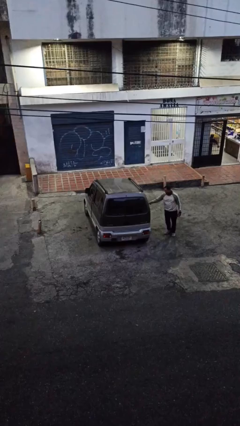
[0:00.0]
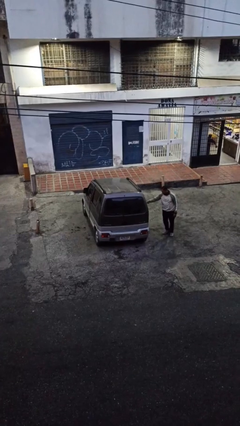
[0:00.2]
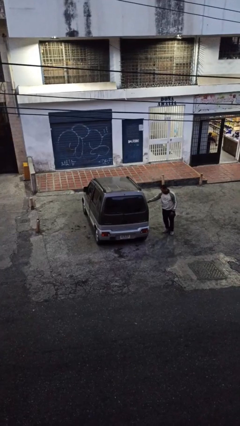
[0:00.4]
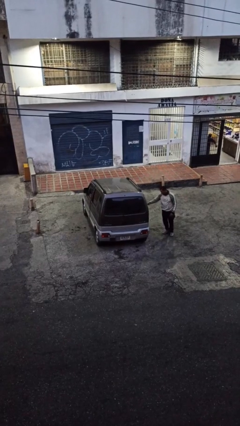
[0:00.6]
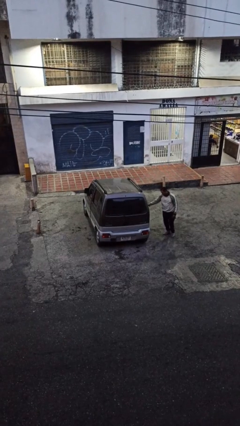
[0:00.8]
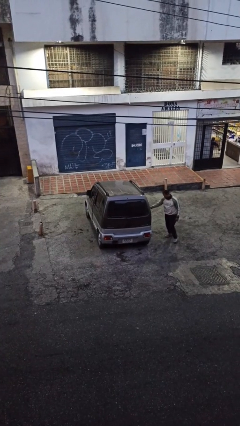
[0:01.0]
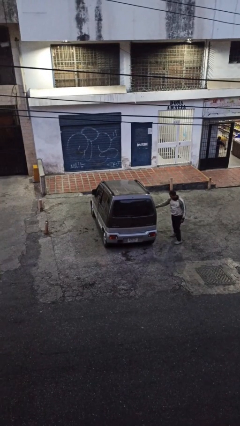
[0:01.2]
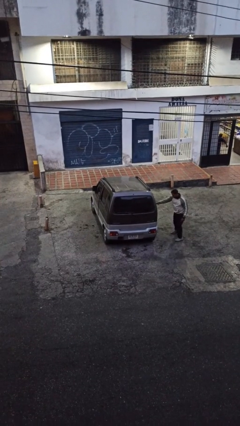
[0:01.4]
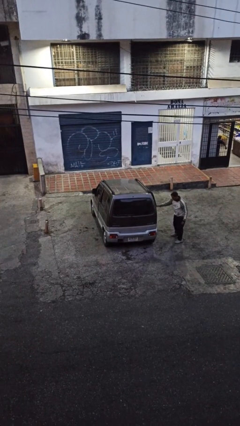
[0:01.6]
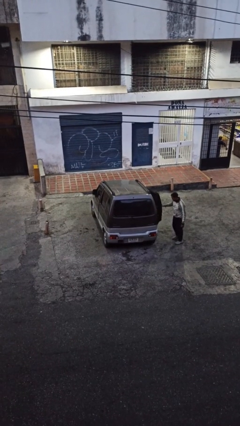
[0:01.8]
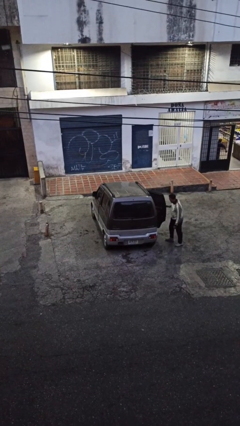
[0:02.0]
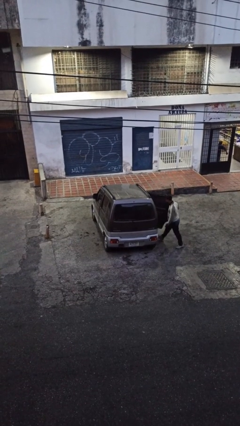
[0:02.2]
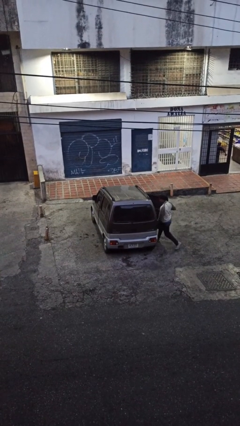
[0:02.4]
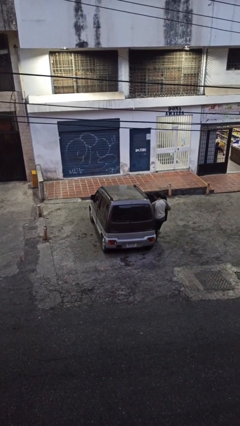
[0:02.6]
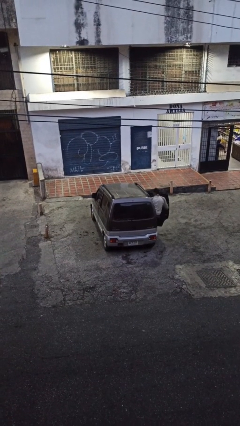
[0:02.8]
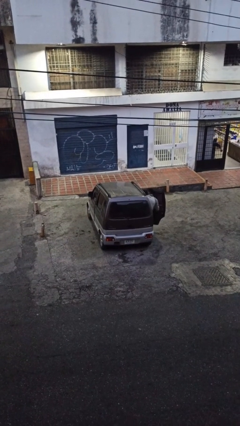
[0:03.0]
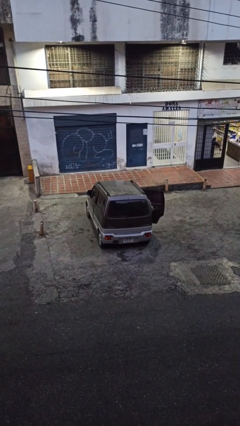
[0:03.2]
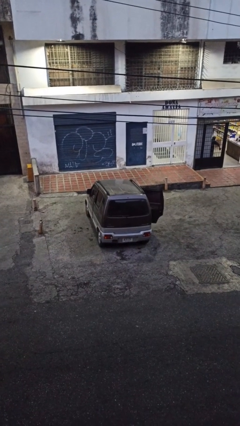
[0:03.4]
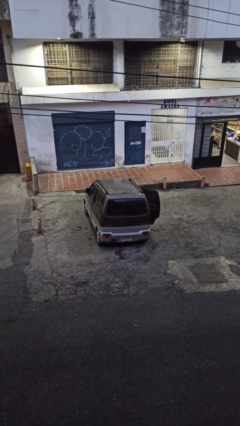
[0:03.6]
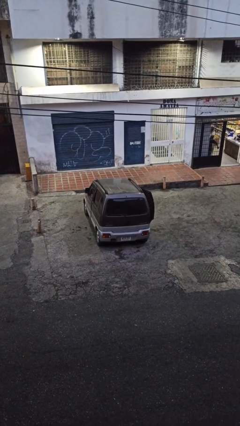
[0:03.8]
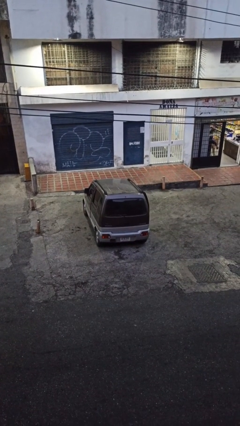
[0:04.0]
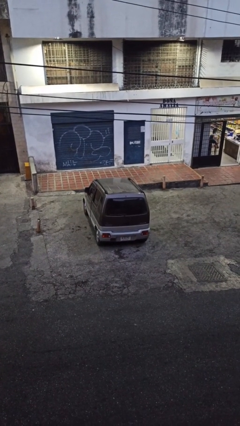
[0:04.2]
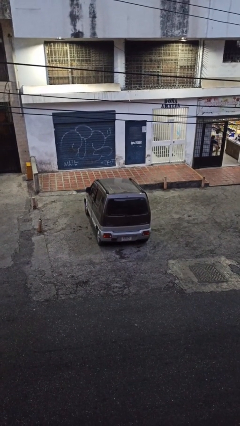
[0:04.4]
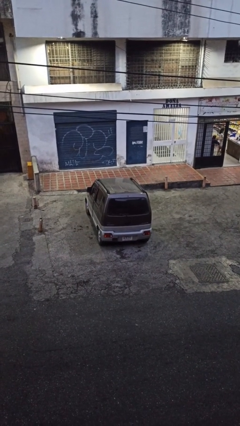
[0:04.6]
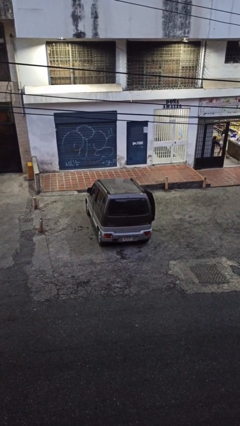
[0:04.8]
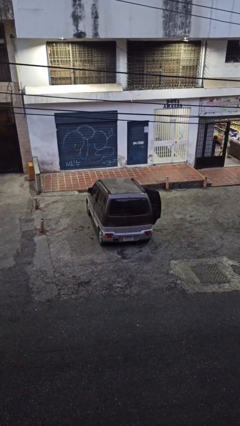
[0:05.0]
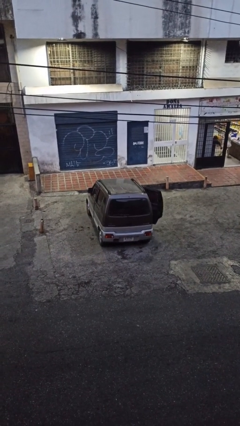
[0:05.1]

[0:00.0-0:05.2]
car picks up person

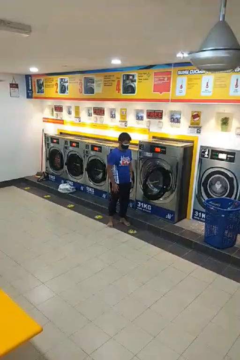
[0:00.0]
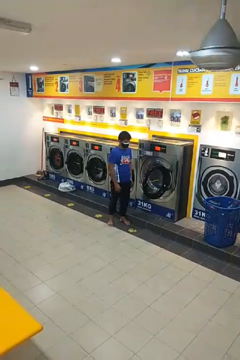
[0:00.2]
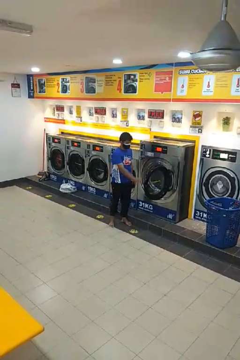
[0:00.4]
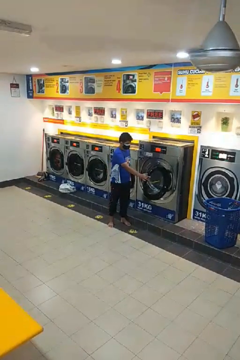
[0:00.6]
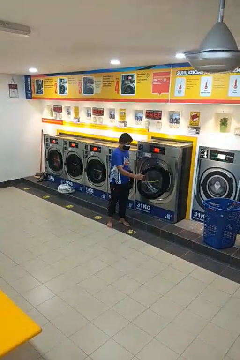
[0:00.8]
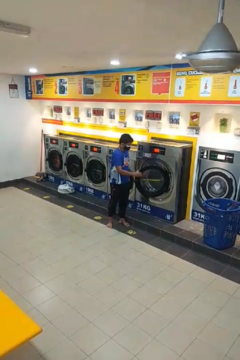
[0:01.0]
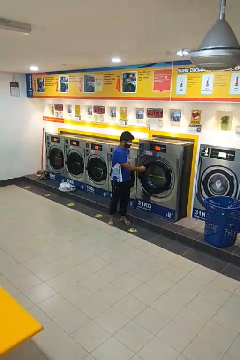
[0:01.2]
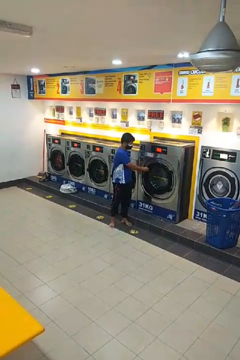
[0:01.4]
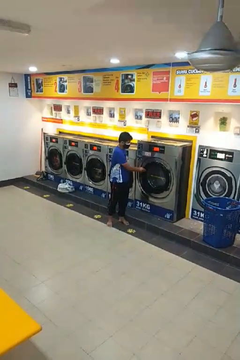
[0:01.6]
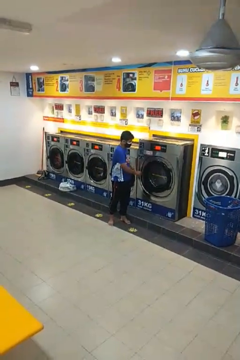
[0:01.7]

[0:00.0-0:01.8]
person closes clothes washer

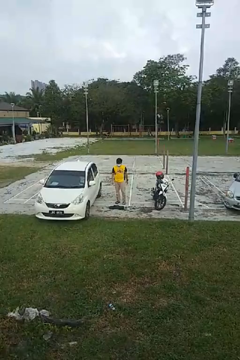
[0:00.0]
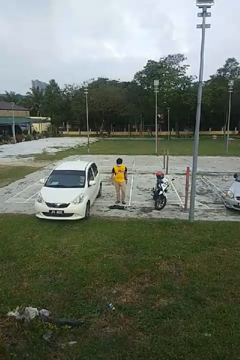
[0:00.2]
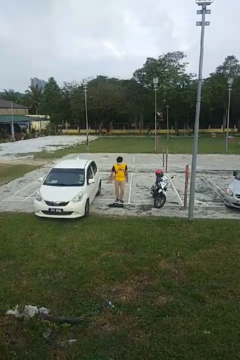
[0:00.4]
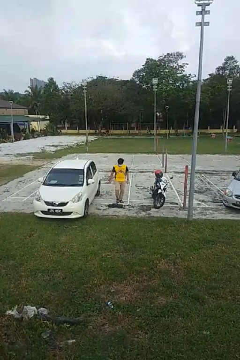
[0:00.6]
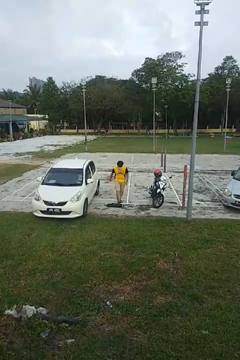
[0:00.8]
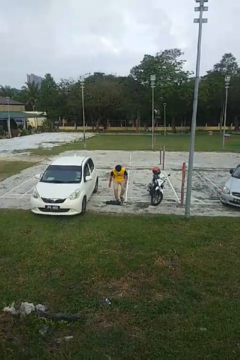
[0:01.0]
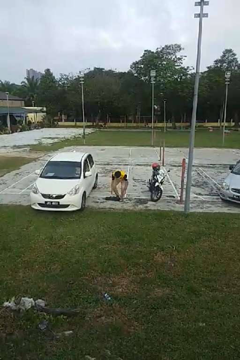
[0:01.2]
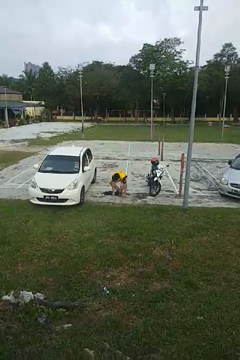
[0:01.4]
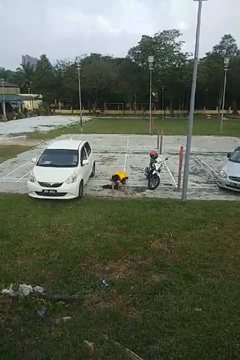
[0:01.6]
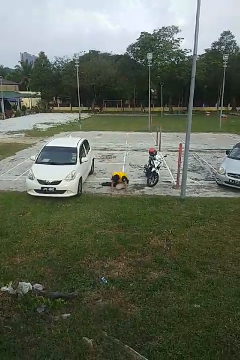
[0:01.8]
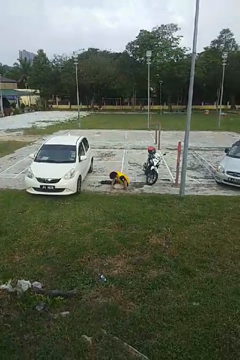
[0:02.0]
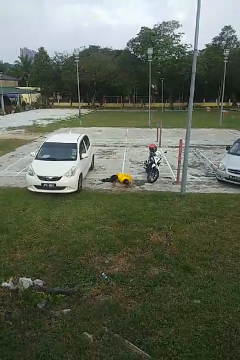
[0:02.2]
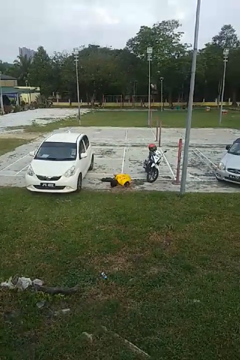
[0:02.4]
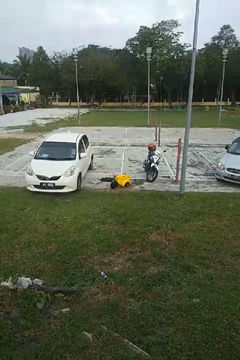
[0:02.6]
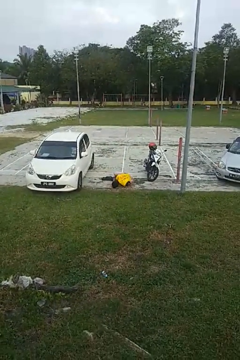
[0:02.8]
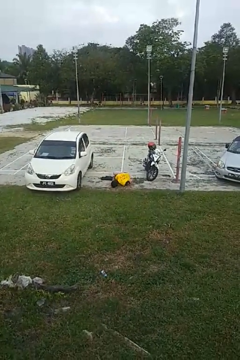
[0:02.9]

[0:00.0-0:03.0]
person trips on object on floor

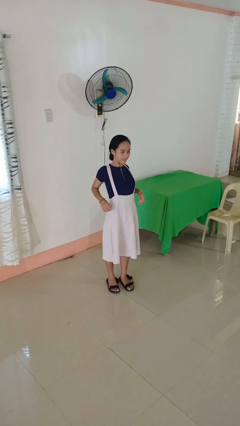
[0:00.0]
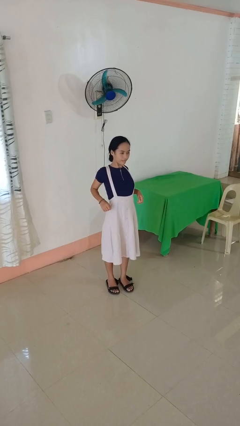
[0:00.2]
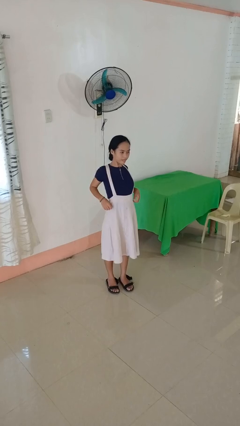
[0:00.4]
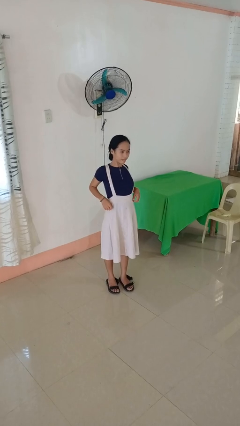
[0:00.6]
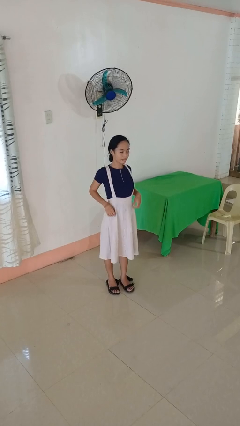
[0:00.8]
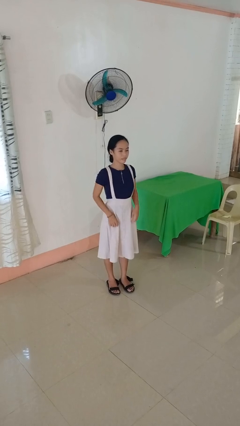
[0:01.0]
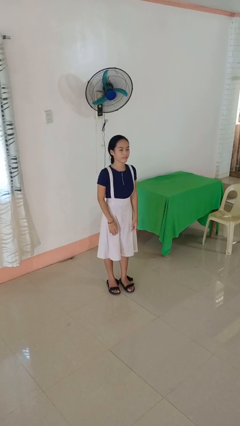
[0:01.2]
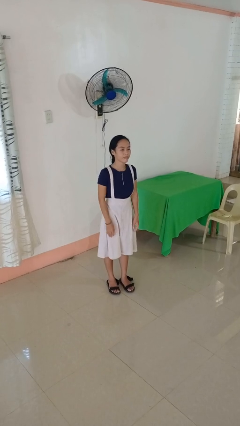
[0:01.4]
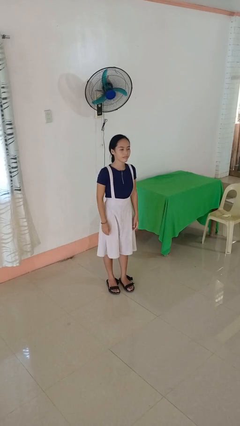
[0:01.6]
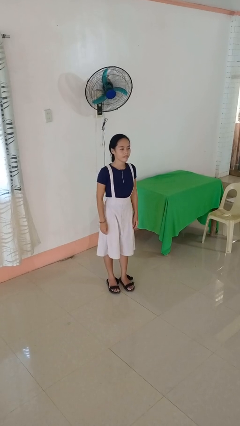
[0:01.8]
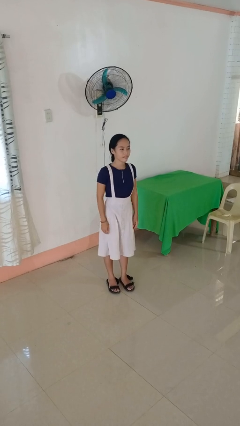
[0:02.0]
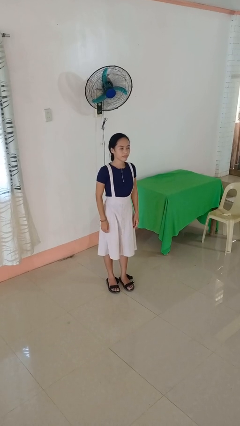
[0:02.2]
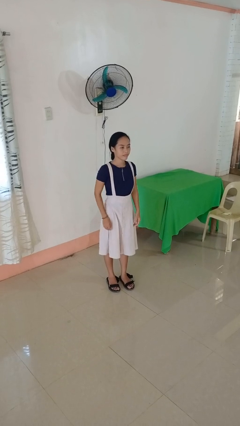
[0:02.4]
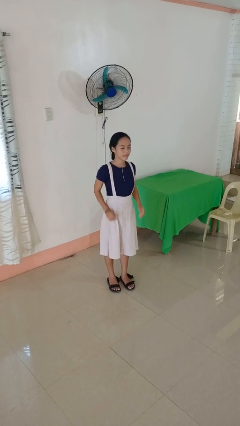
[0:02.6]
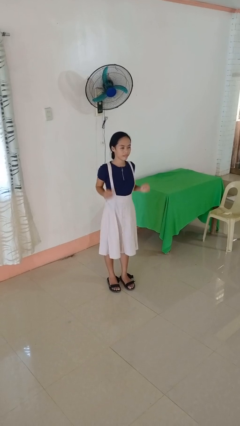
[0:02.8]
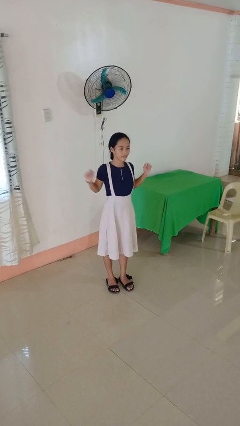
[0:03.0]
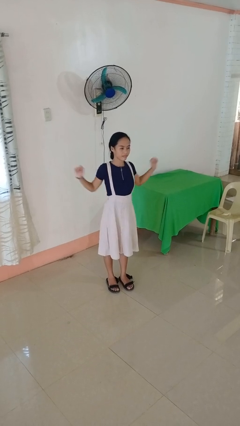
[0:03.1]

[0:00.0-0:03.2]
person stretches back

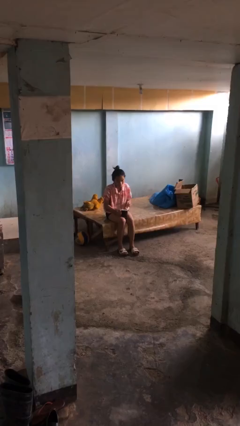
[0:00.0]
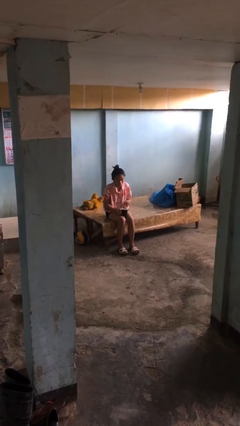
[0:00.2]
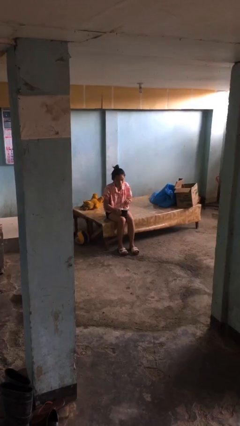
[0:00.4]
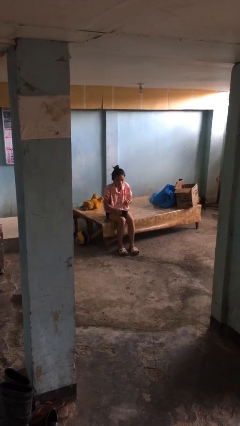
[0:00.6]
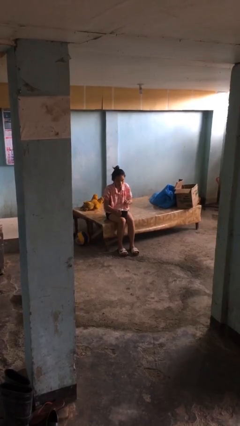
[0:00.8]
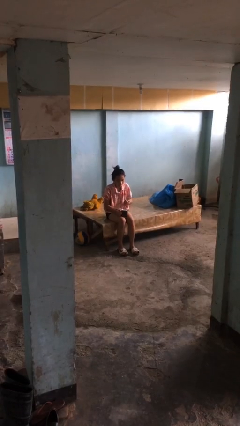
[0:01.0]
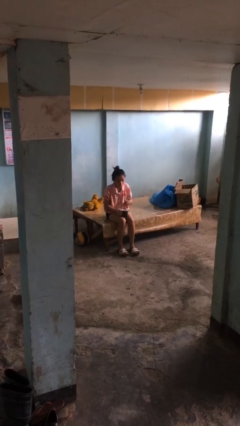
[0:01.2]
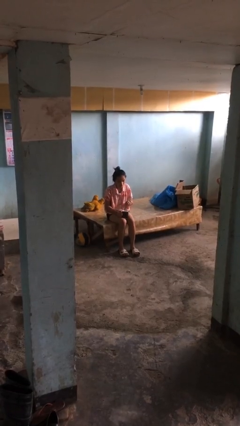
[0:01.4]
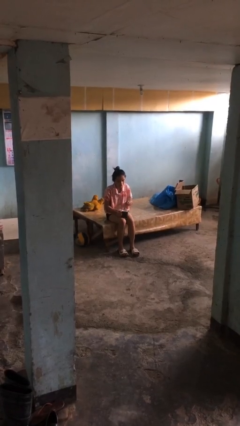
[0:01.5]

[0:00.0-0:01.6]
person stirs mug

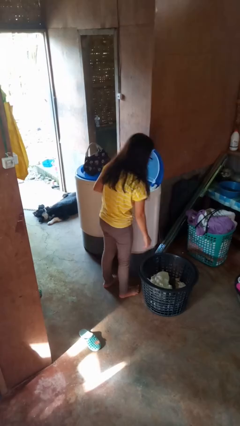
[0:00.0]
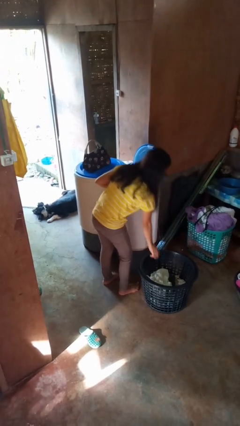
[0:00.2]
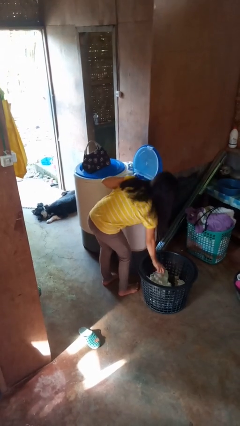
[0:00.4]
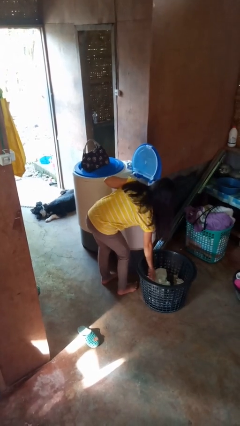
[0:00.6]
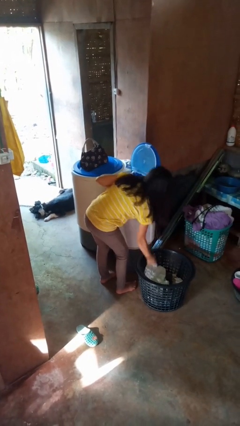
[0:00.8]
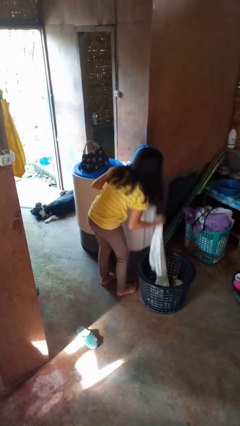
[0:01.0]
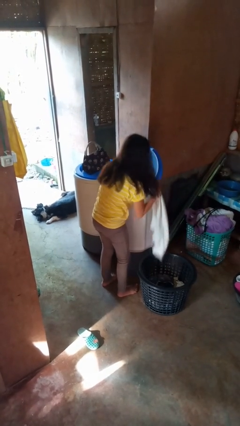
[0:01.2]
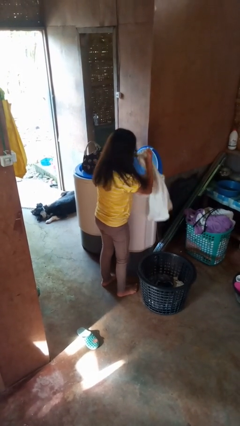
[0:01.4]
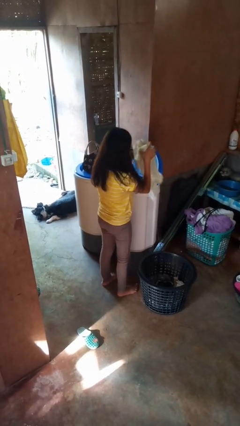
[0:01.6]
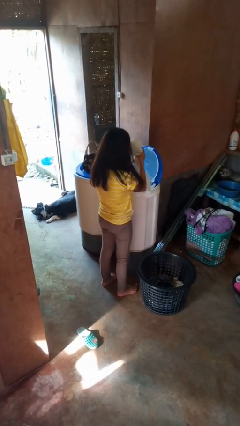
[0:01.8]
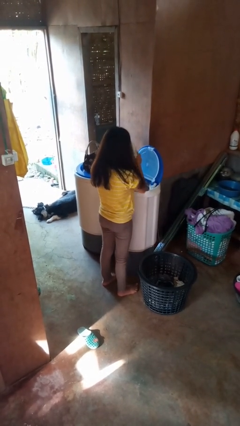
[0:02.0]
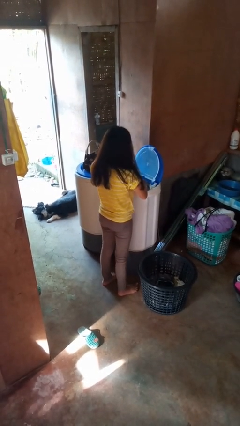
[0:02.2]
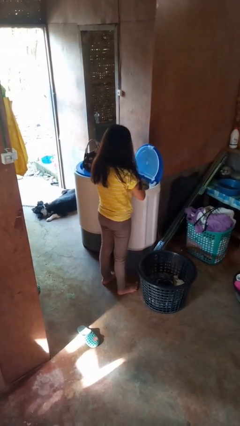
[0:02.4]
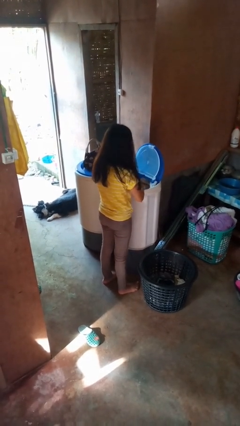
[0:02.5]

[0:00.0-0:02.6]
person loads clotheswasher

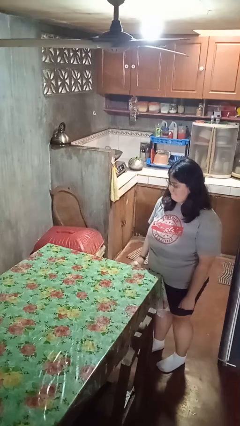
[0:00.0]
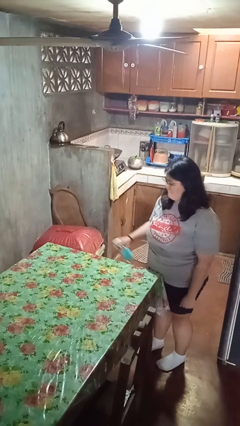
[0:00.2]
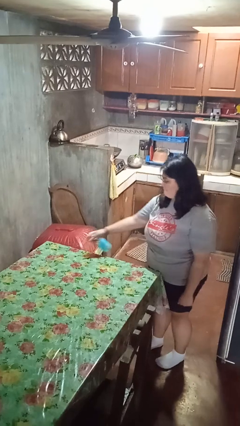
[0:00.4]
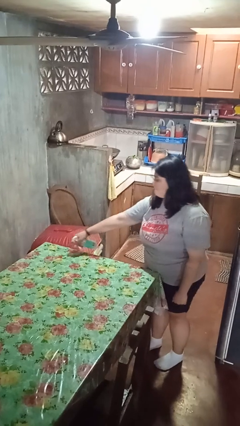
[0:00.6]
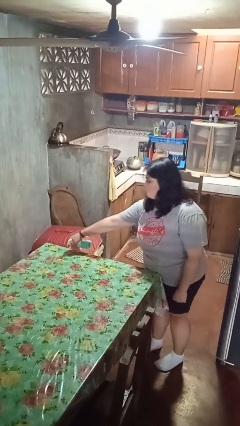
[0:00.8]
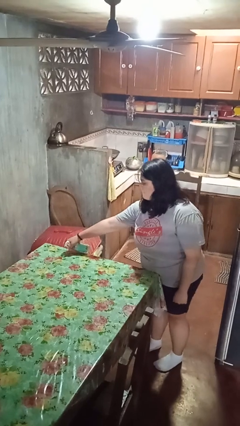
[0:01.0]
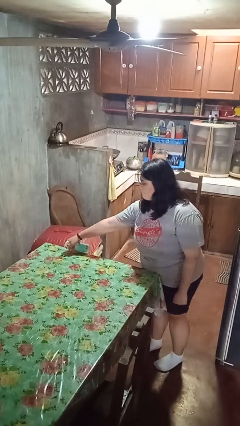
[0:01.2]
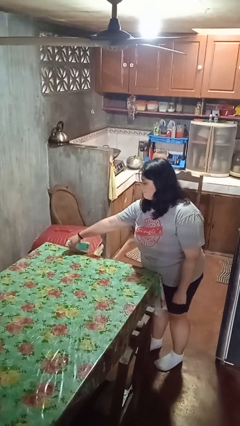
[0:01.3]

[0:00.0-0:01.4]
person sprays from bottle
